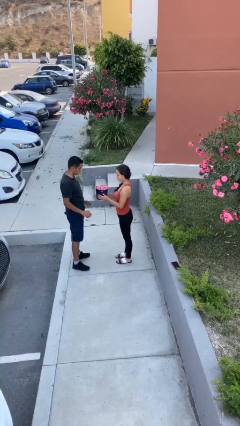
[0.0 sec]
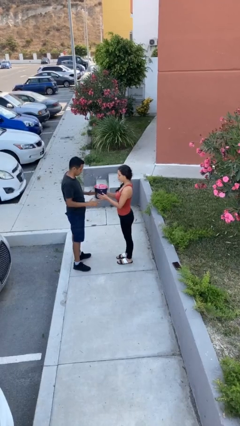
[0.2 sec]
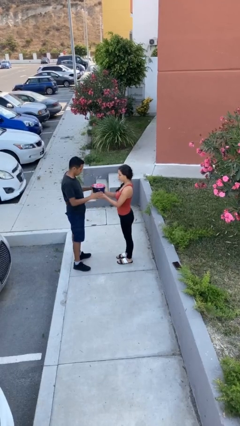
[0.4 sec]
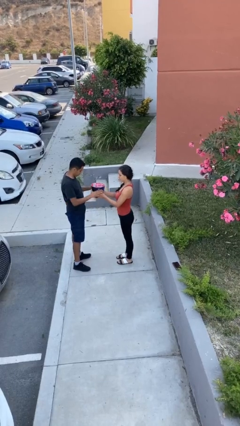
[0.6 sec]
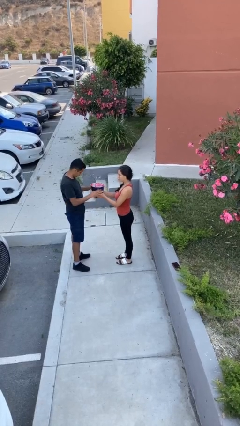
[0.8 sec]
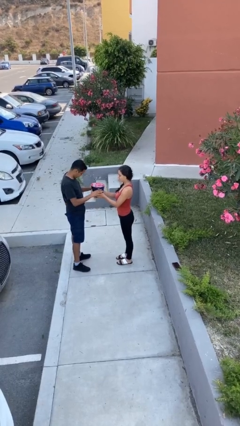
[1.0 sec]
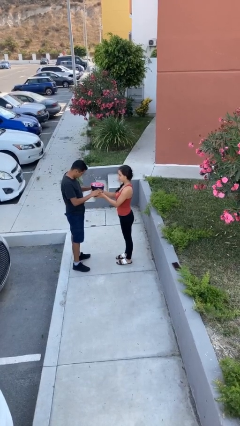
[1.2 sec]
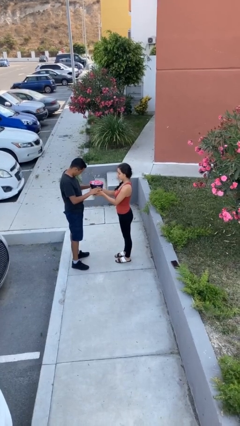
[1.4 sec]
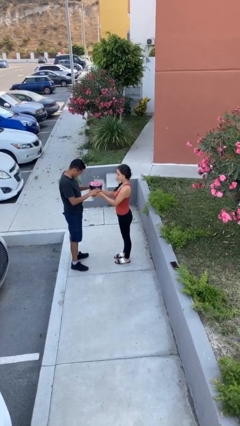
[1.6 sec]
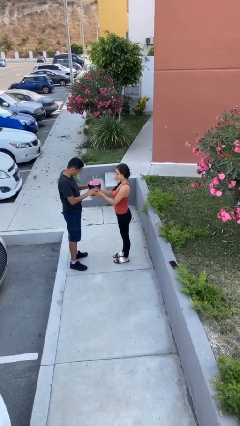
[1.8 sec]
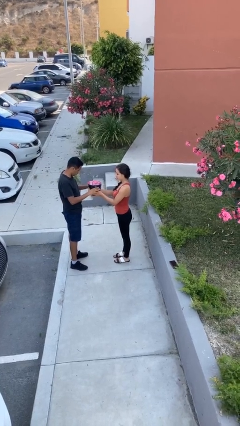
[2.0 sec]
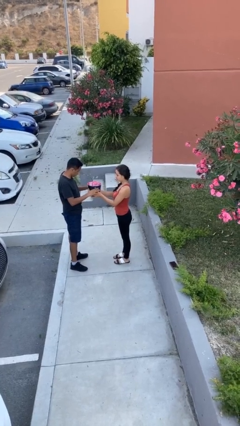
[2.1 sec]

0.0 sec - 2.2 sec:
person transfers object to person

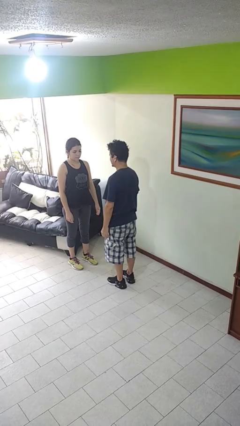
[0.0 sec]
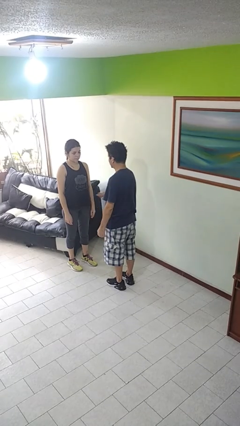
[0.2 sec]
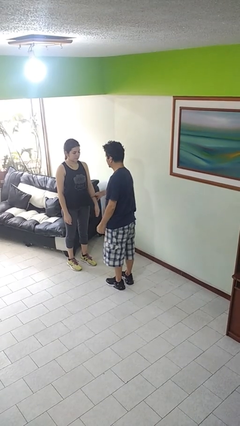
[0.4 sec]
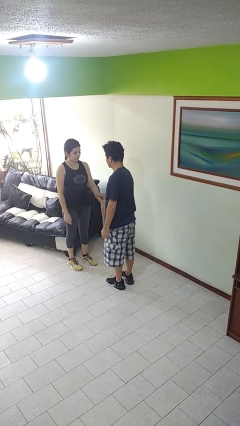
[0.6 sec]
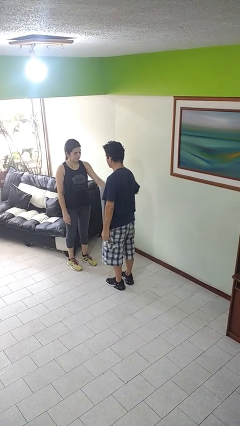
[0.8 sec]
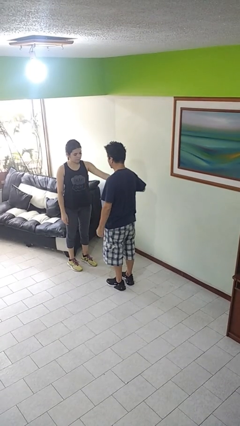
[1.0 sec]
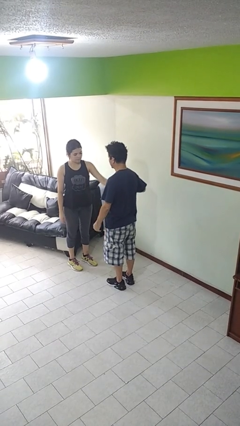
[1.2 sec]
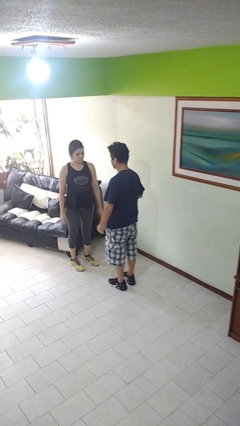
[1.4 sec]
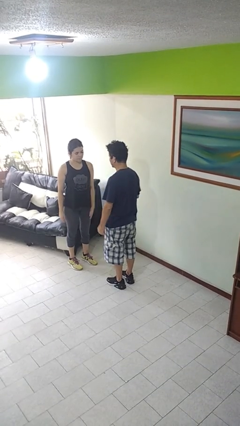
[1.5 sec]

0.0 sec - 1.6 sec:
person grabs person by forearm

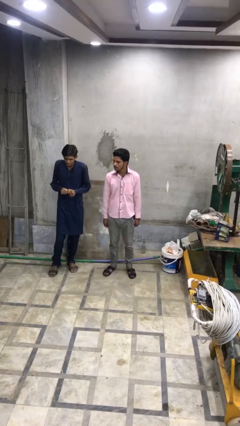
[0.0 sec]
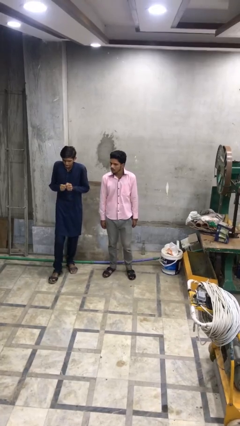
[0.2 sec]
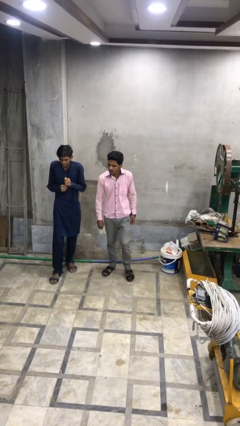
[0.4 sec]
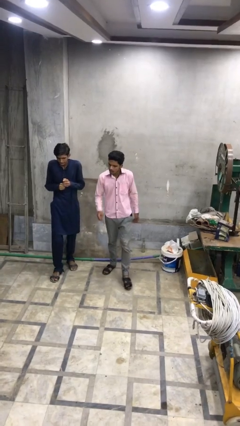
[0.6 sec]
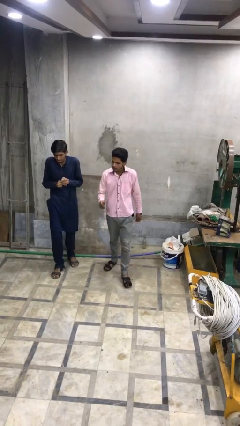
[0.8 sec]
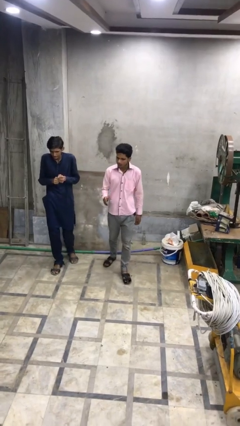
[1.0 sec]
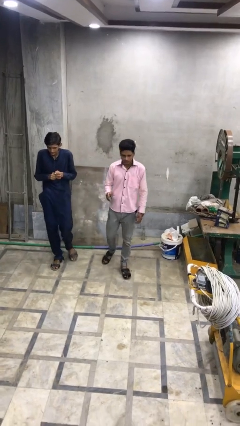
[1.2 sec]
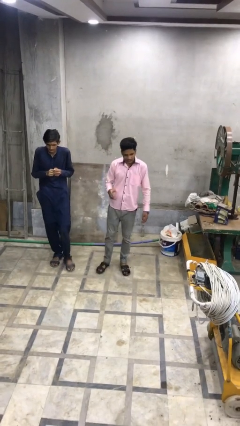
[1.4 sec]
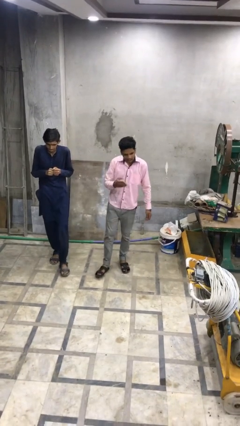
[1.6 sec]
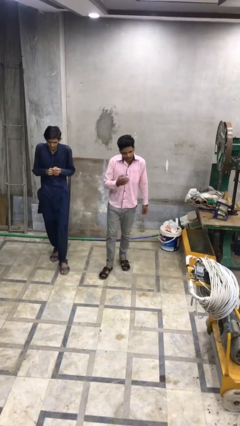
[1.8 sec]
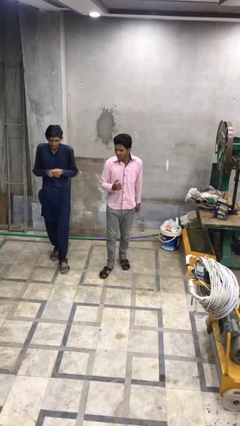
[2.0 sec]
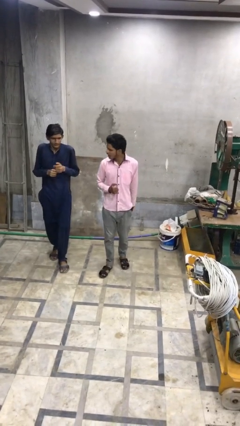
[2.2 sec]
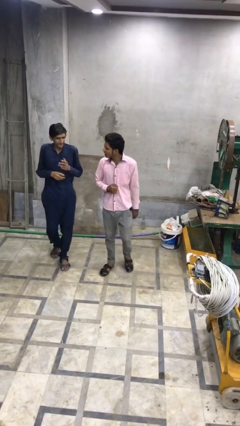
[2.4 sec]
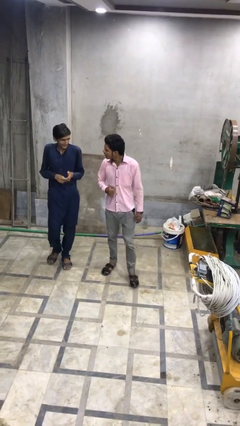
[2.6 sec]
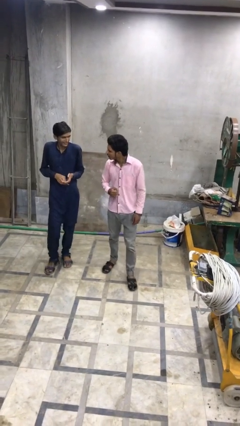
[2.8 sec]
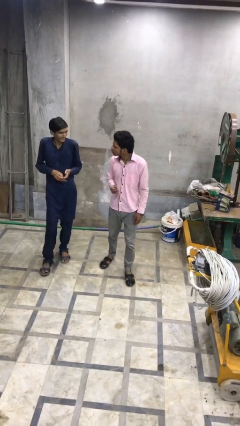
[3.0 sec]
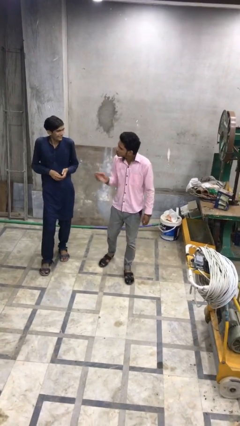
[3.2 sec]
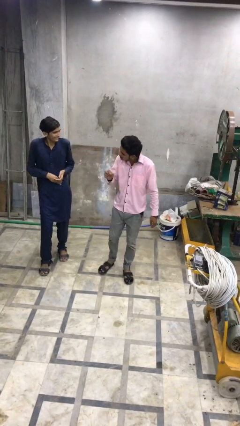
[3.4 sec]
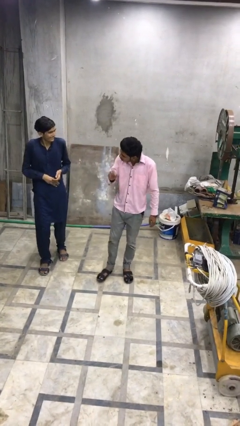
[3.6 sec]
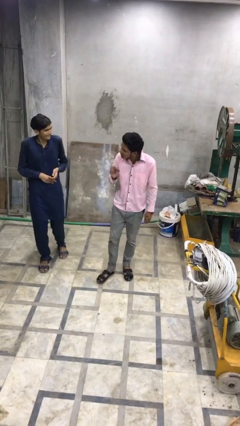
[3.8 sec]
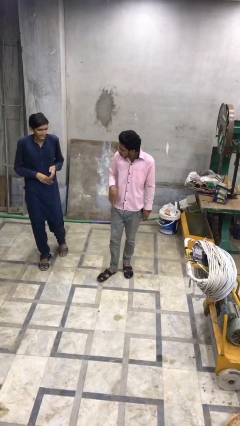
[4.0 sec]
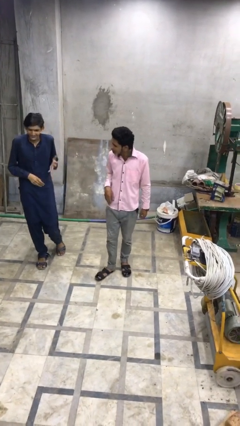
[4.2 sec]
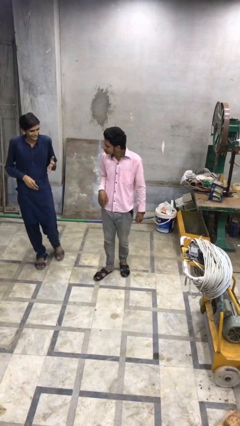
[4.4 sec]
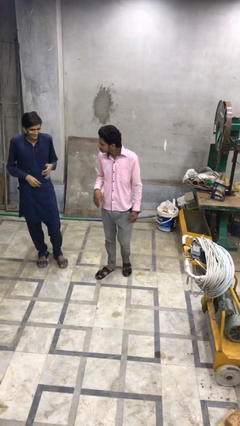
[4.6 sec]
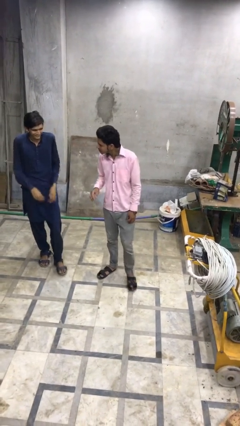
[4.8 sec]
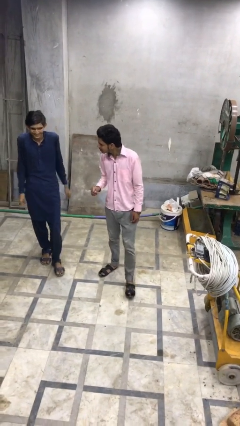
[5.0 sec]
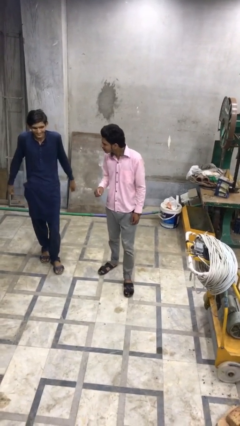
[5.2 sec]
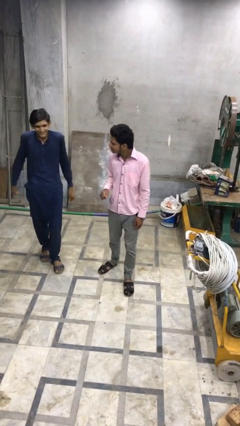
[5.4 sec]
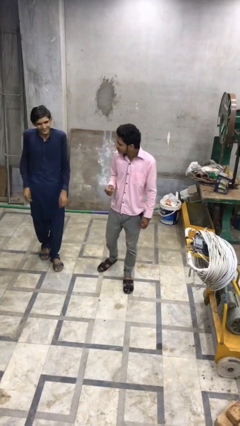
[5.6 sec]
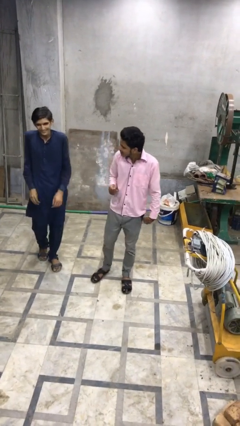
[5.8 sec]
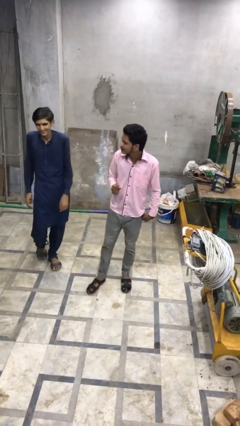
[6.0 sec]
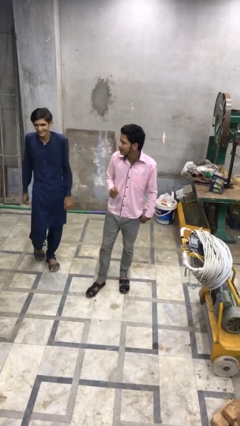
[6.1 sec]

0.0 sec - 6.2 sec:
person talks to person

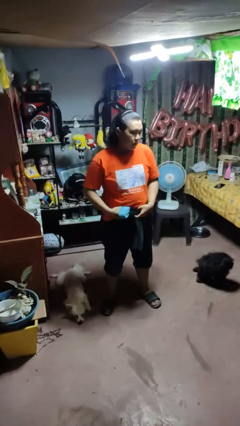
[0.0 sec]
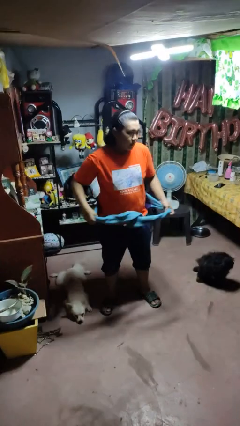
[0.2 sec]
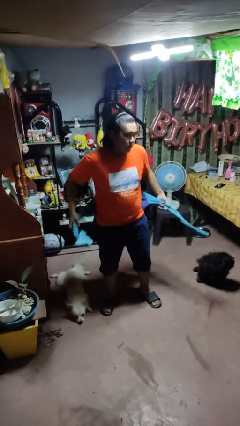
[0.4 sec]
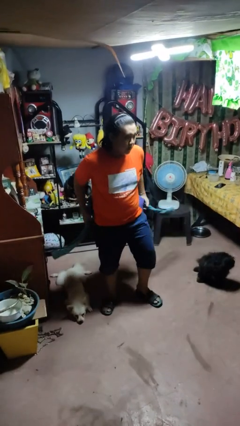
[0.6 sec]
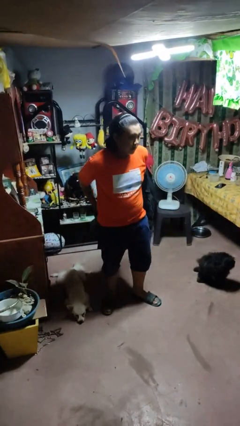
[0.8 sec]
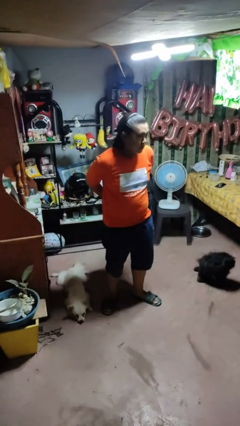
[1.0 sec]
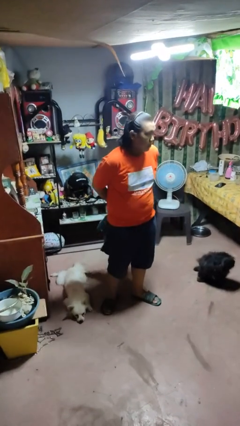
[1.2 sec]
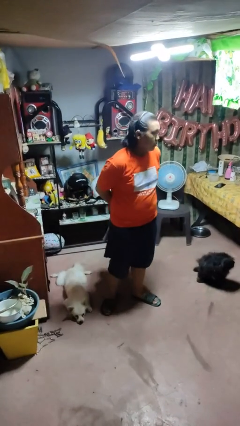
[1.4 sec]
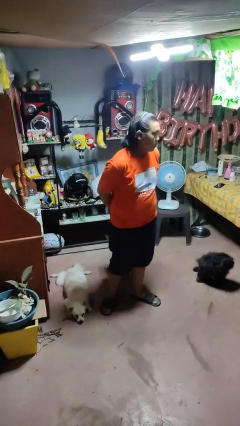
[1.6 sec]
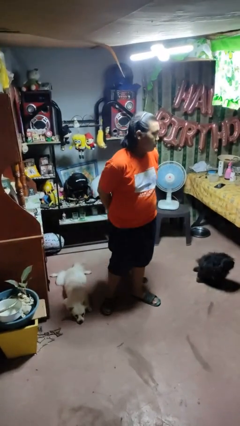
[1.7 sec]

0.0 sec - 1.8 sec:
person unties jacket around waist

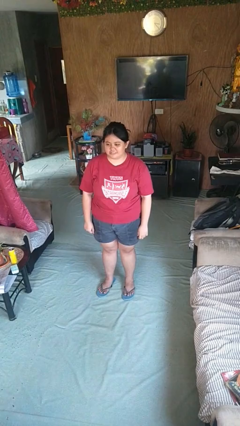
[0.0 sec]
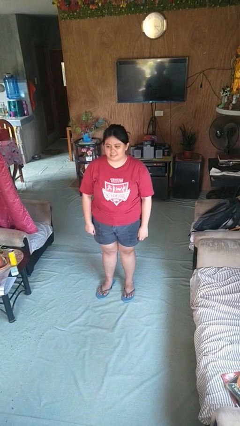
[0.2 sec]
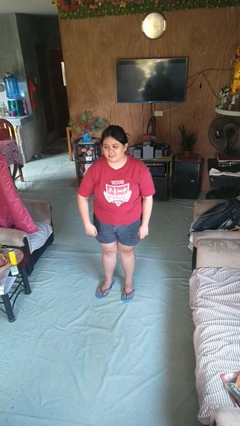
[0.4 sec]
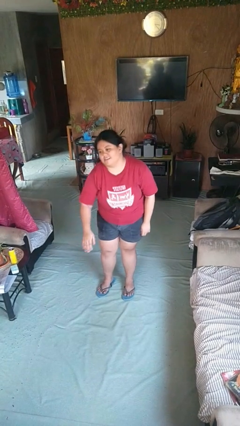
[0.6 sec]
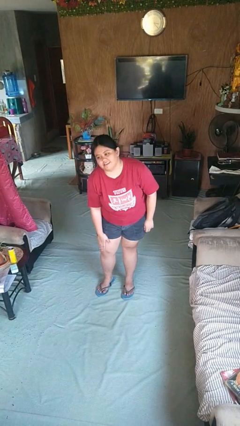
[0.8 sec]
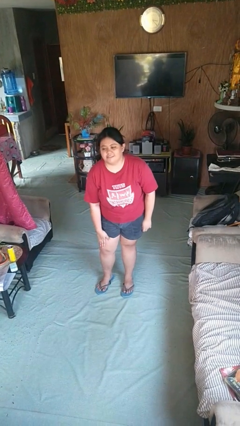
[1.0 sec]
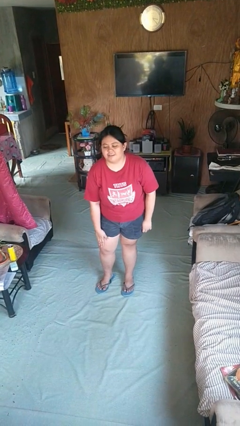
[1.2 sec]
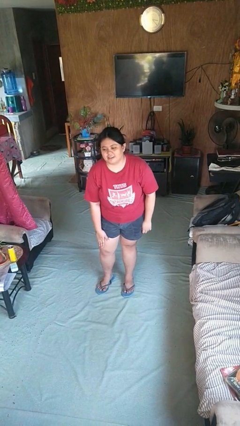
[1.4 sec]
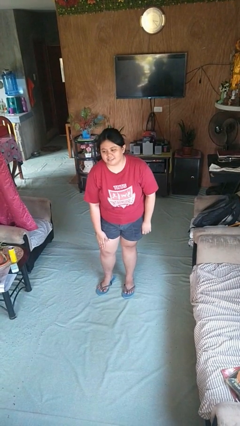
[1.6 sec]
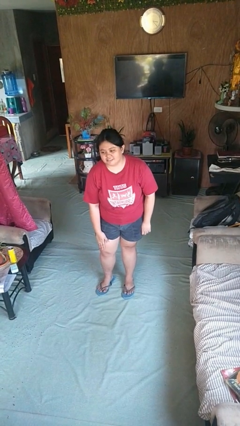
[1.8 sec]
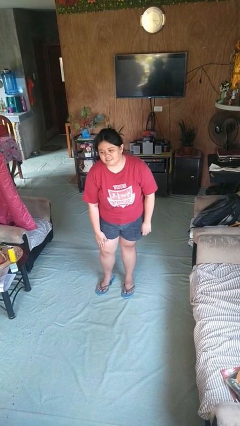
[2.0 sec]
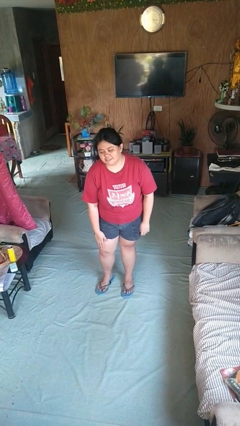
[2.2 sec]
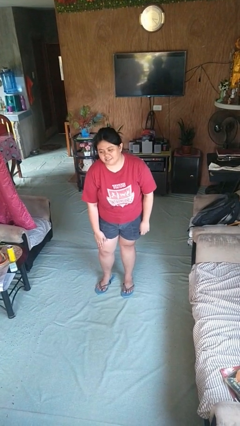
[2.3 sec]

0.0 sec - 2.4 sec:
person swats bug

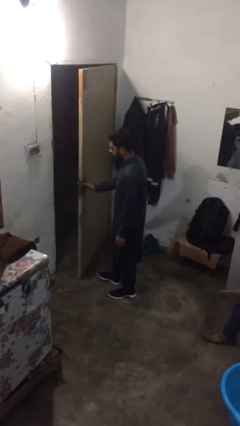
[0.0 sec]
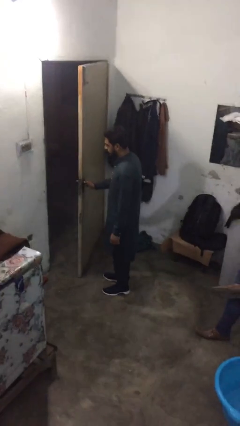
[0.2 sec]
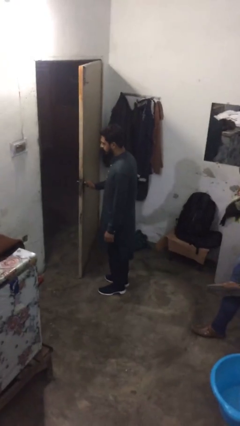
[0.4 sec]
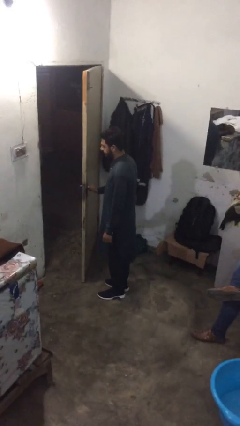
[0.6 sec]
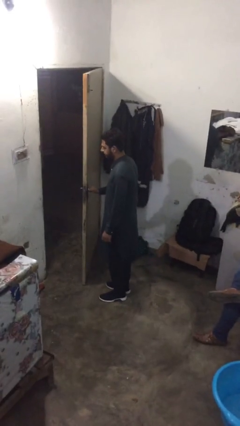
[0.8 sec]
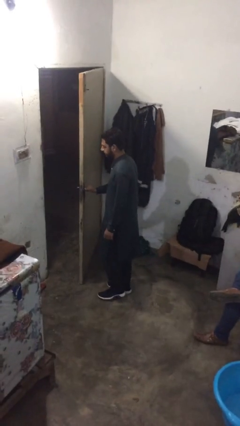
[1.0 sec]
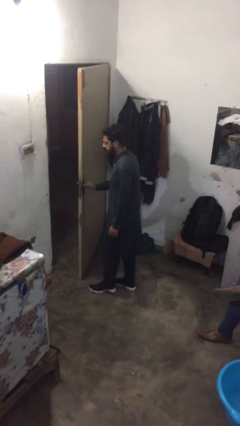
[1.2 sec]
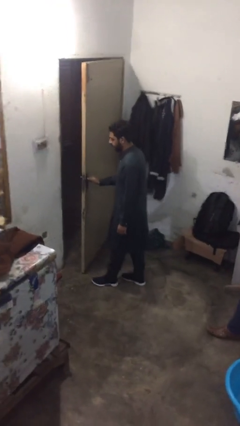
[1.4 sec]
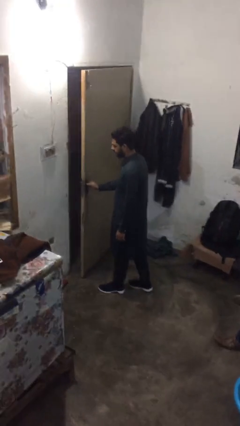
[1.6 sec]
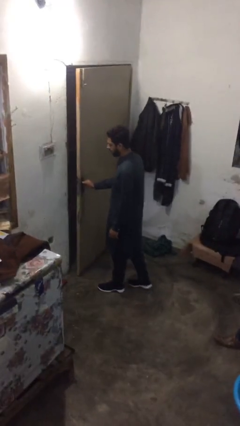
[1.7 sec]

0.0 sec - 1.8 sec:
person closes facility door

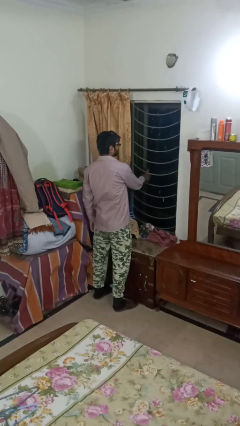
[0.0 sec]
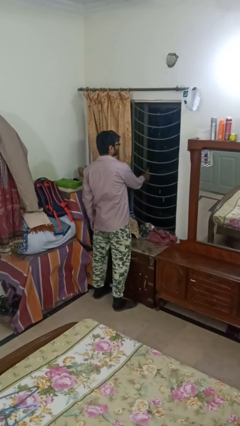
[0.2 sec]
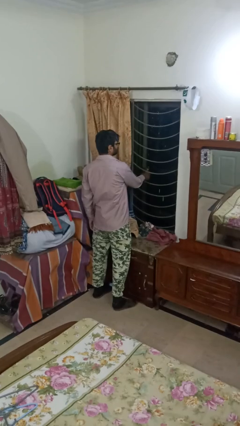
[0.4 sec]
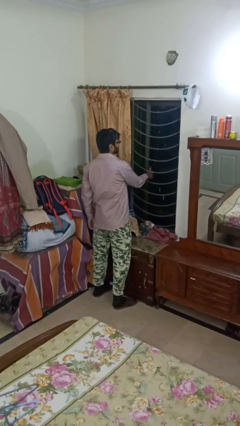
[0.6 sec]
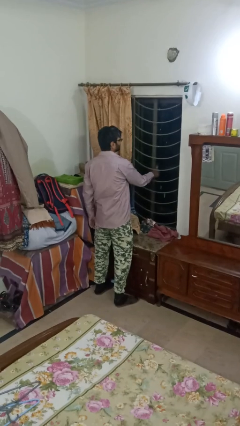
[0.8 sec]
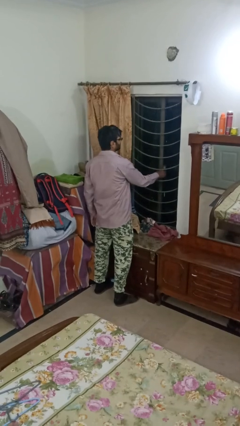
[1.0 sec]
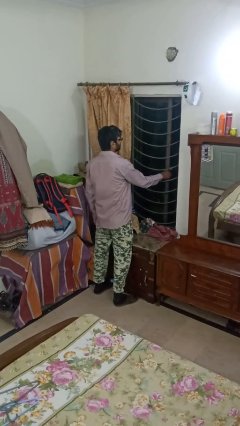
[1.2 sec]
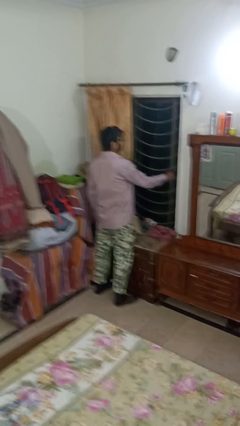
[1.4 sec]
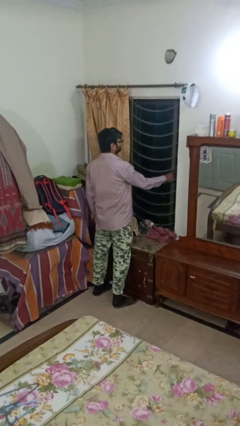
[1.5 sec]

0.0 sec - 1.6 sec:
person closes home window
